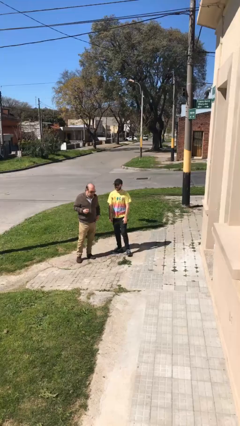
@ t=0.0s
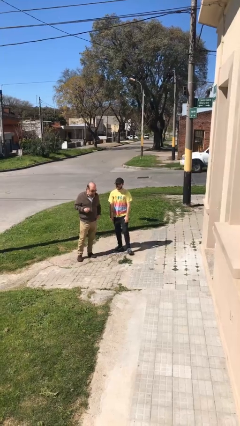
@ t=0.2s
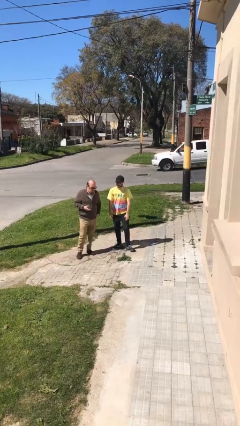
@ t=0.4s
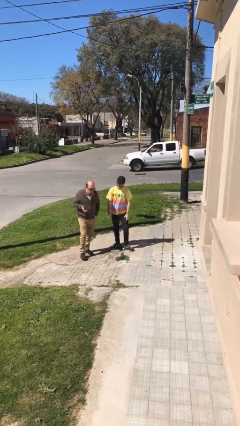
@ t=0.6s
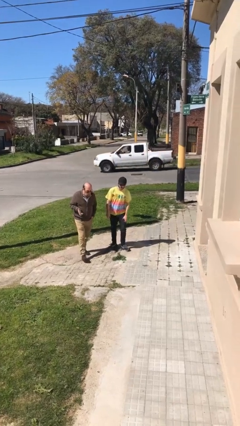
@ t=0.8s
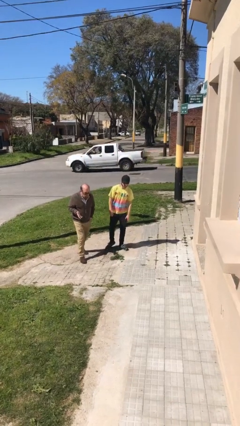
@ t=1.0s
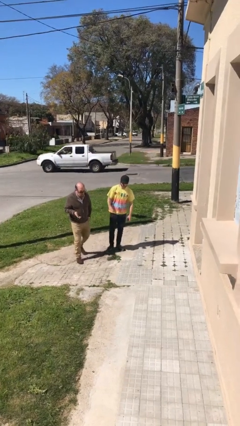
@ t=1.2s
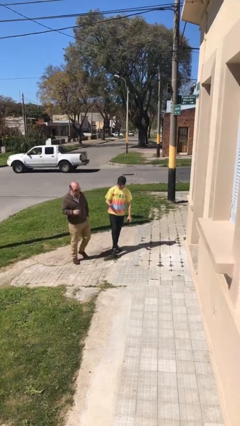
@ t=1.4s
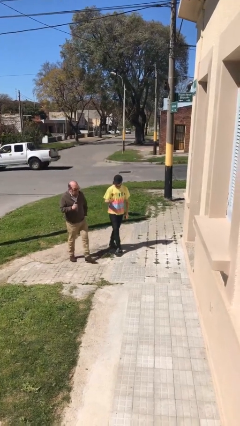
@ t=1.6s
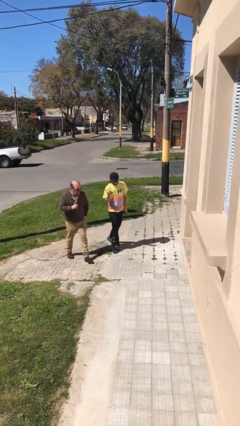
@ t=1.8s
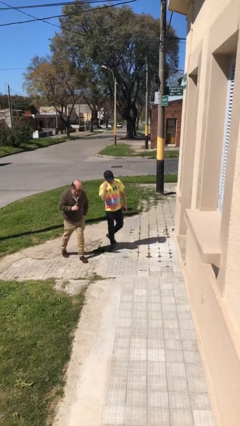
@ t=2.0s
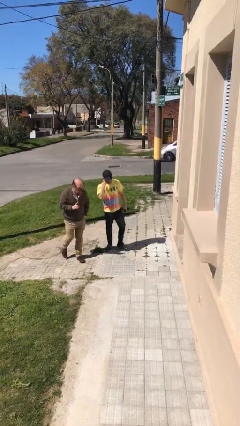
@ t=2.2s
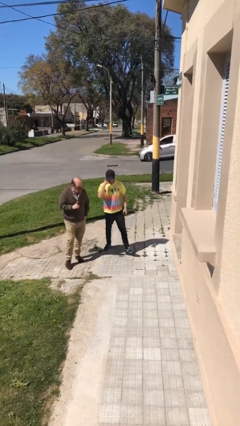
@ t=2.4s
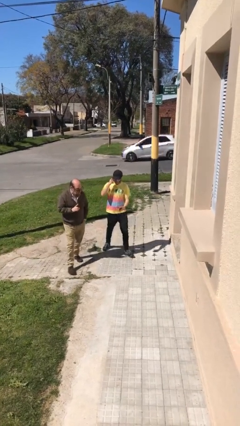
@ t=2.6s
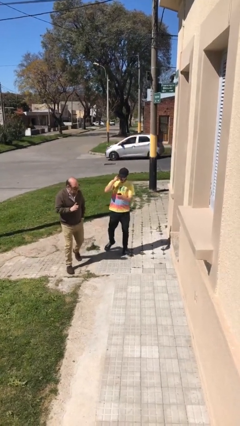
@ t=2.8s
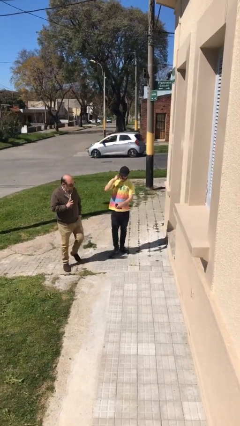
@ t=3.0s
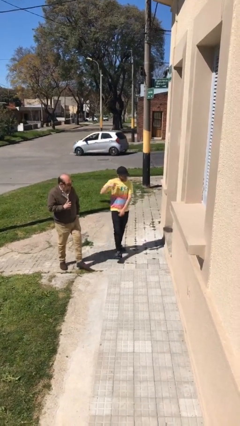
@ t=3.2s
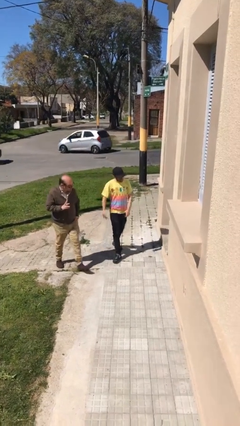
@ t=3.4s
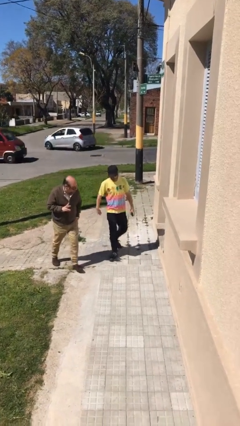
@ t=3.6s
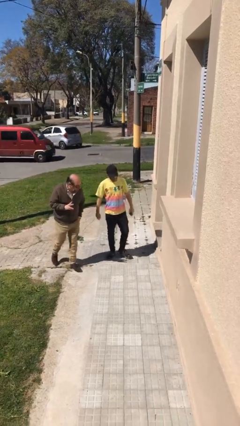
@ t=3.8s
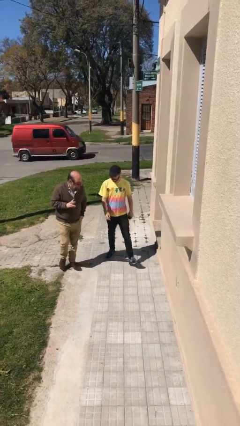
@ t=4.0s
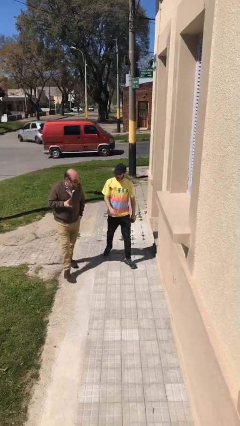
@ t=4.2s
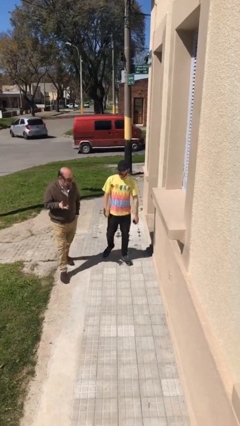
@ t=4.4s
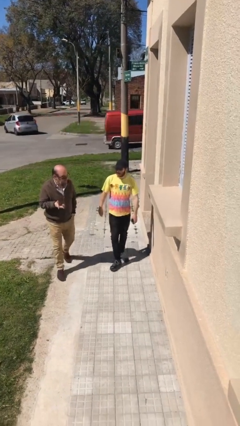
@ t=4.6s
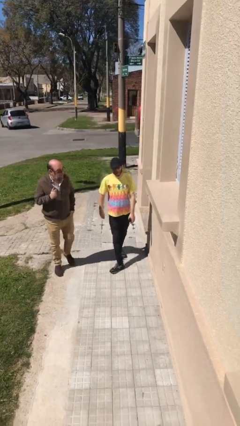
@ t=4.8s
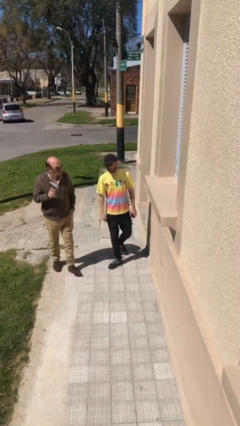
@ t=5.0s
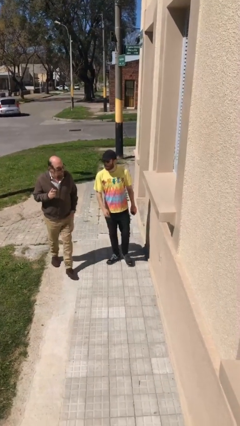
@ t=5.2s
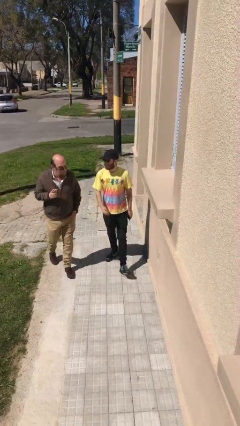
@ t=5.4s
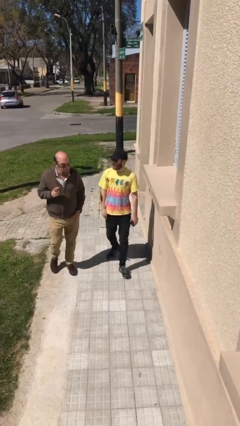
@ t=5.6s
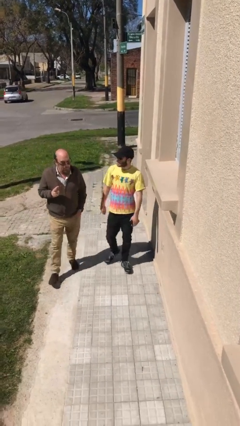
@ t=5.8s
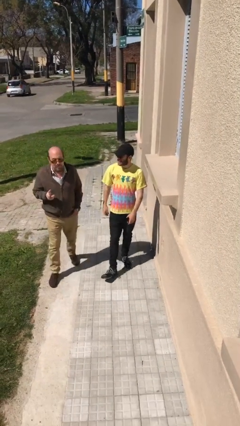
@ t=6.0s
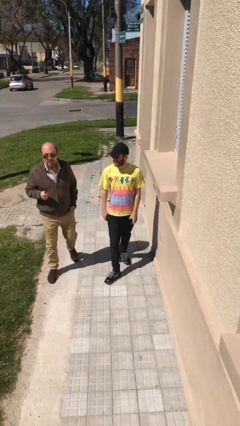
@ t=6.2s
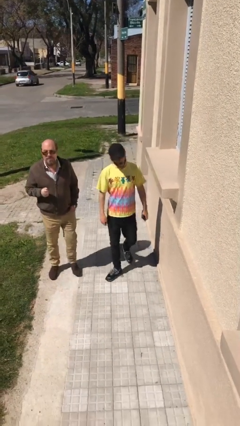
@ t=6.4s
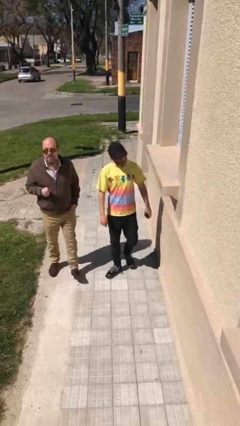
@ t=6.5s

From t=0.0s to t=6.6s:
person talks to person

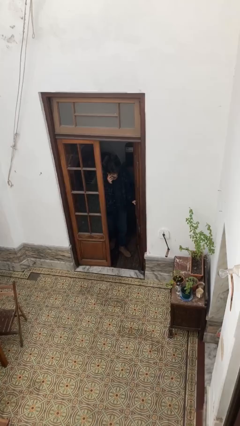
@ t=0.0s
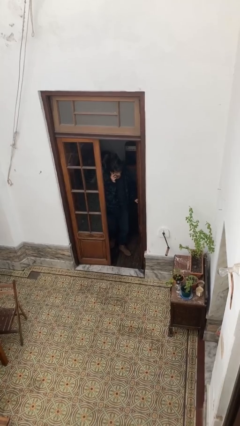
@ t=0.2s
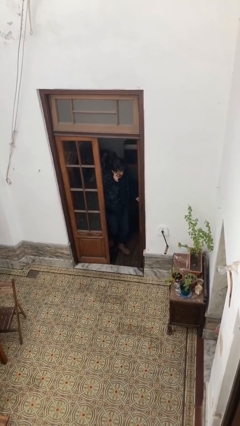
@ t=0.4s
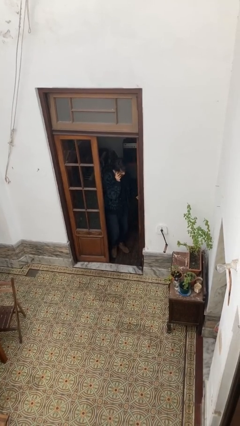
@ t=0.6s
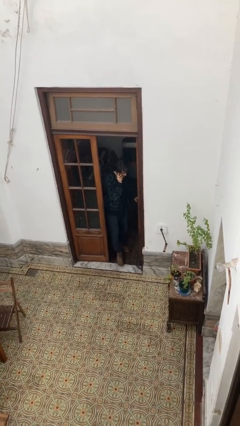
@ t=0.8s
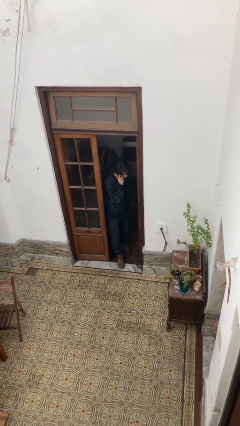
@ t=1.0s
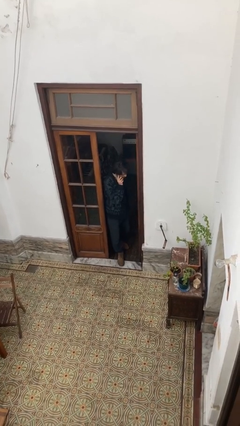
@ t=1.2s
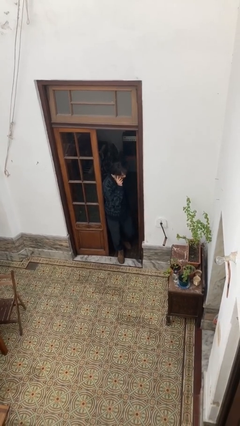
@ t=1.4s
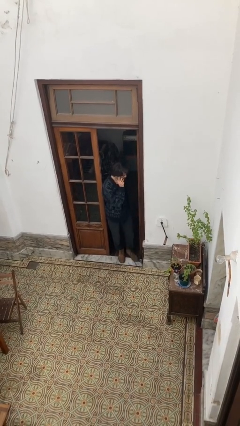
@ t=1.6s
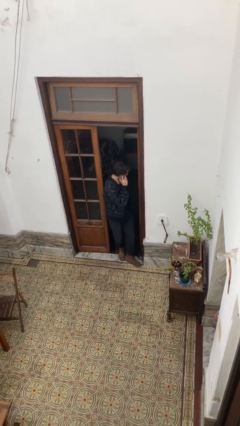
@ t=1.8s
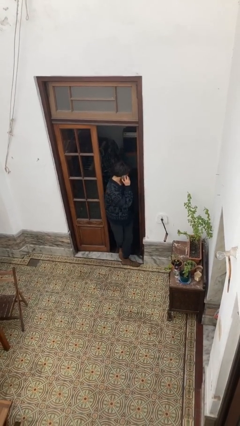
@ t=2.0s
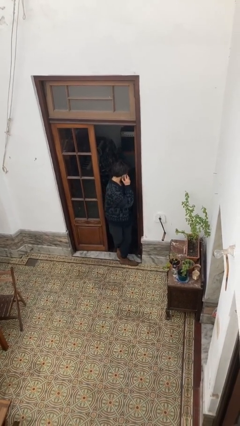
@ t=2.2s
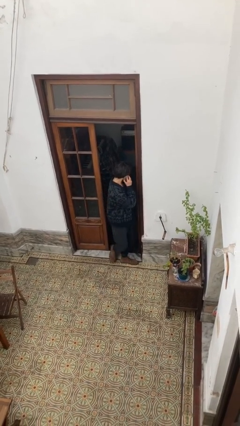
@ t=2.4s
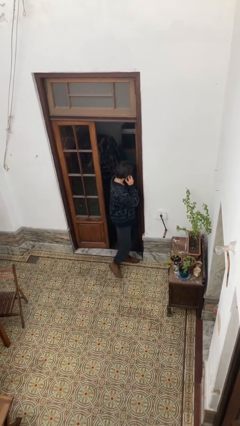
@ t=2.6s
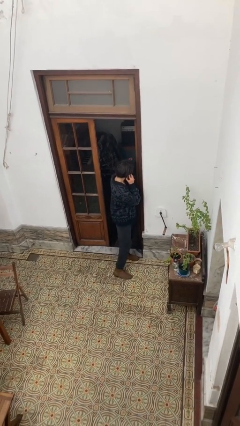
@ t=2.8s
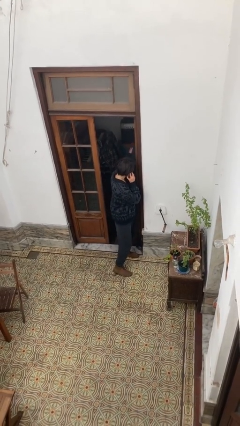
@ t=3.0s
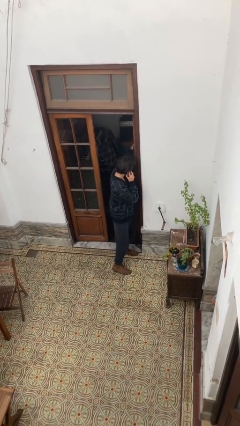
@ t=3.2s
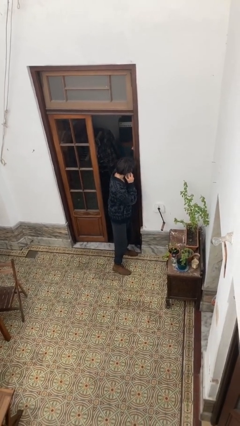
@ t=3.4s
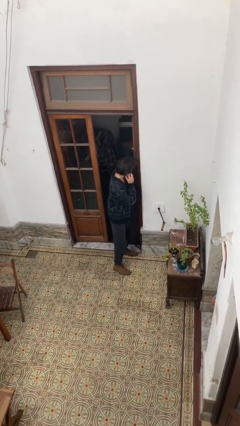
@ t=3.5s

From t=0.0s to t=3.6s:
person enters scene through structure

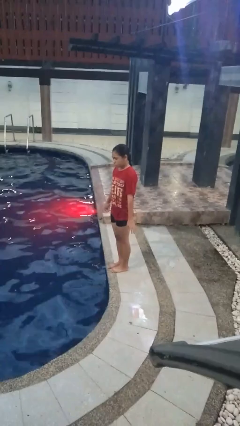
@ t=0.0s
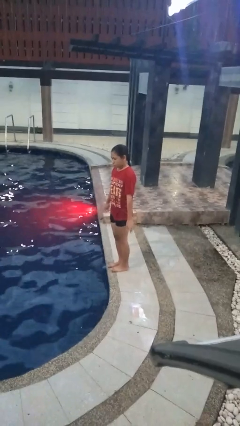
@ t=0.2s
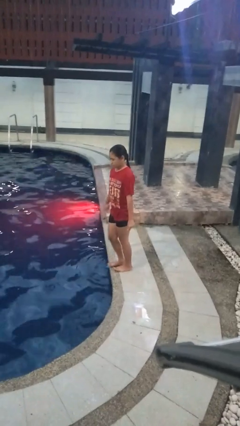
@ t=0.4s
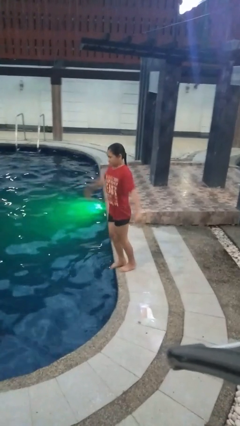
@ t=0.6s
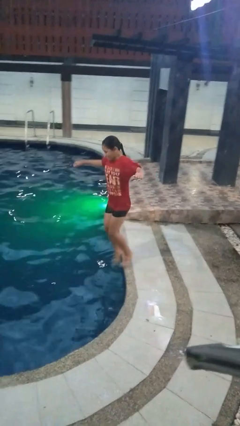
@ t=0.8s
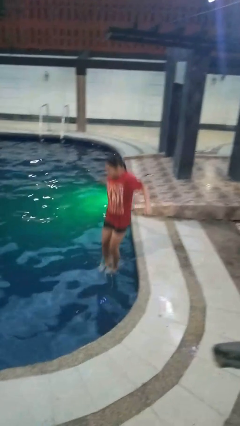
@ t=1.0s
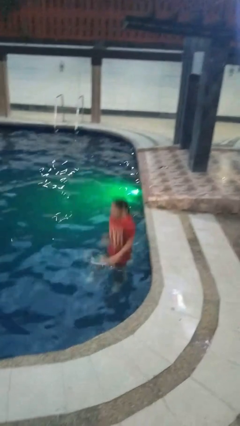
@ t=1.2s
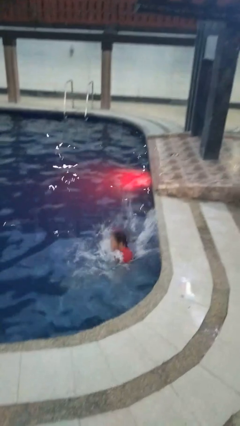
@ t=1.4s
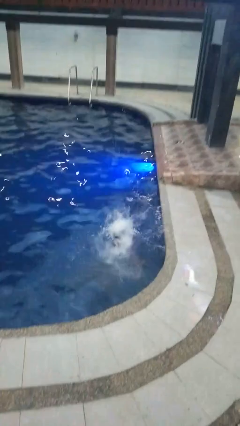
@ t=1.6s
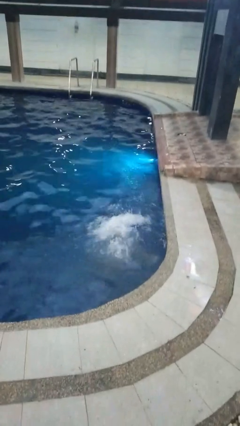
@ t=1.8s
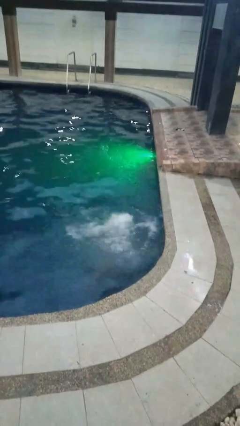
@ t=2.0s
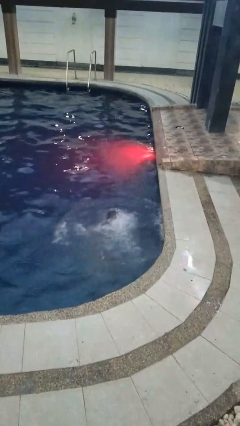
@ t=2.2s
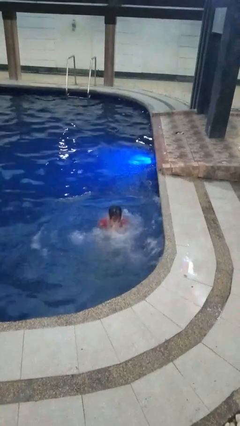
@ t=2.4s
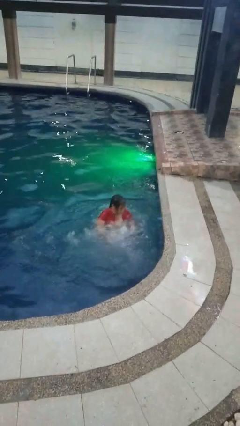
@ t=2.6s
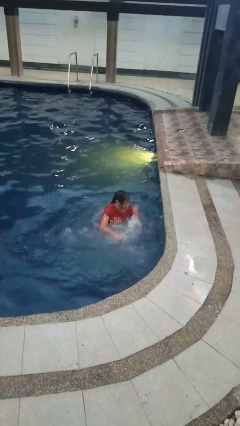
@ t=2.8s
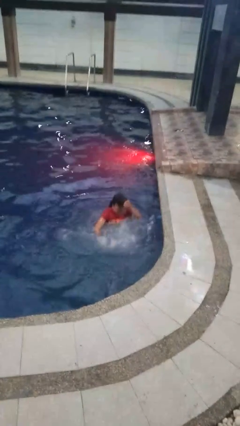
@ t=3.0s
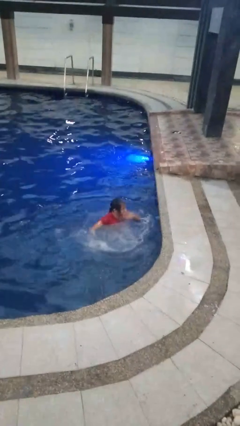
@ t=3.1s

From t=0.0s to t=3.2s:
person jumps into pool

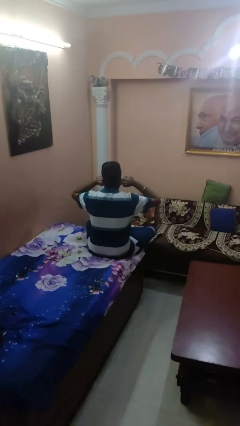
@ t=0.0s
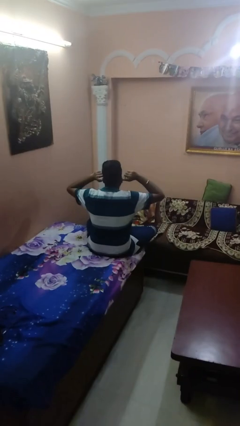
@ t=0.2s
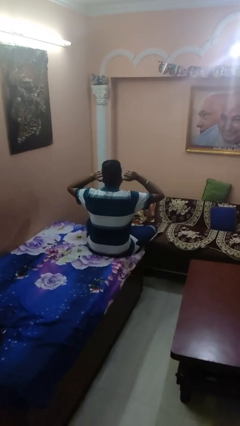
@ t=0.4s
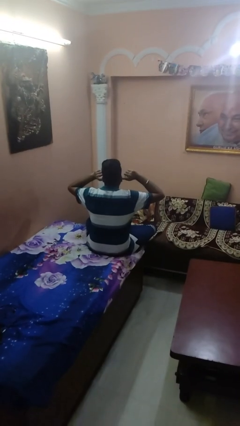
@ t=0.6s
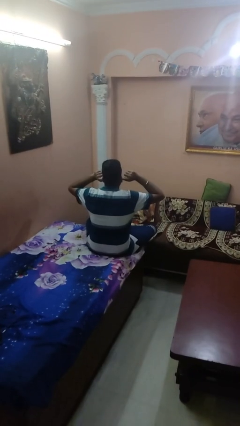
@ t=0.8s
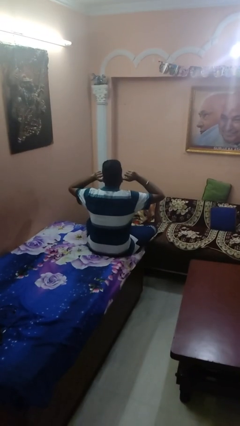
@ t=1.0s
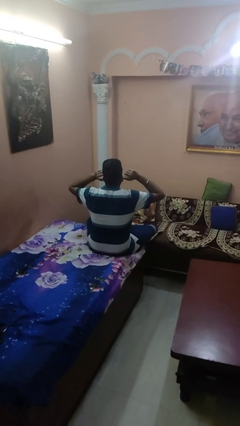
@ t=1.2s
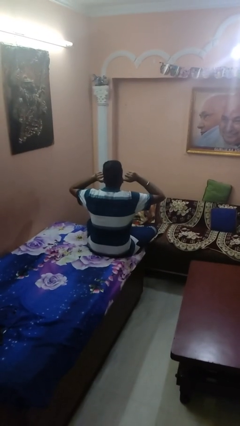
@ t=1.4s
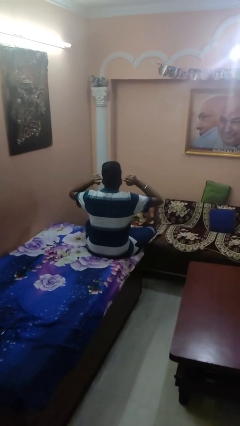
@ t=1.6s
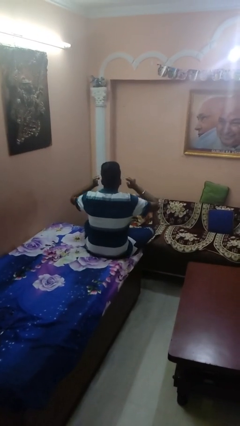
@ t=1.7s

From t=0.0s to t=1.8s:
person puts fingers in ear

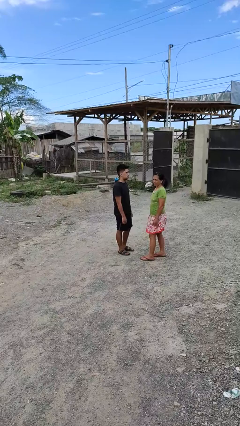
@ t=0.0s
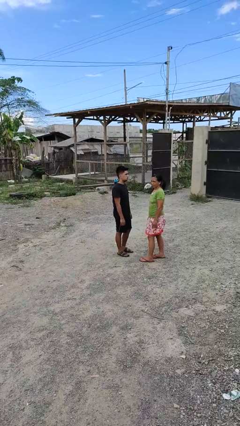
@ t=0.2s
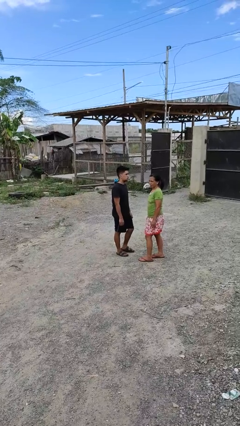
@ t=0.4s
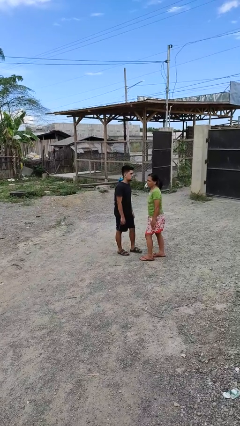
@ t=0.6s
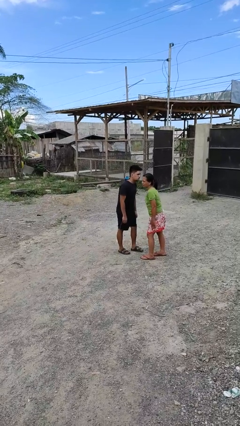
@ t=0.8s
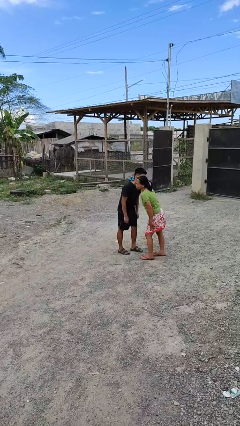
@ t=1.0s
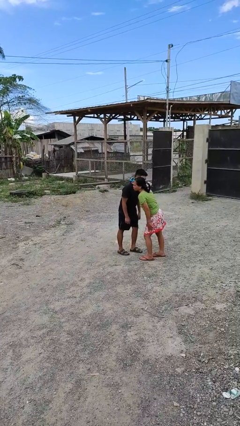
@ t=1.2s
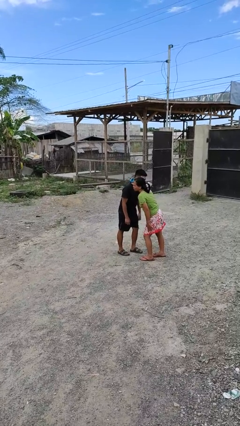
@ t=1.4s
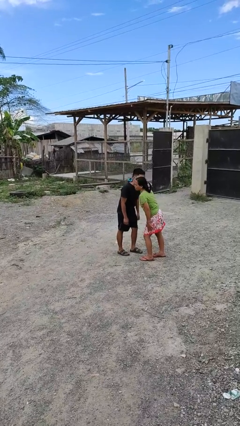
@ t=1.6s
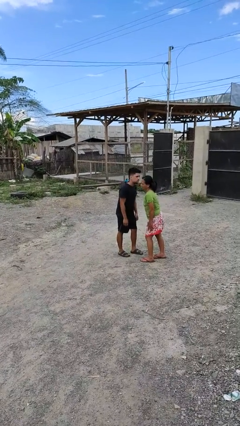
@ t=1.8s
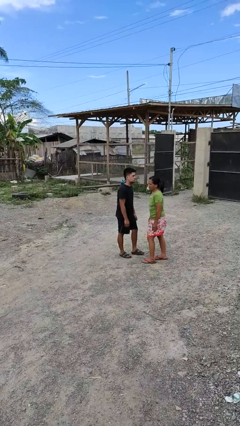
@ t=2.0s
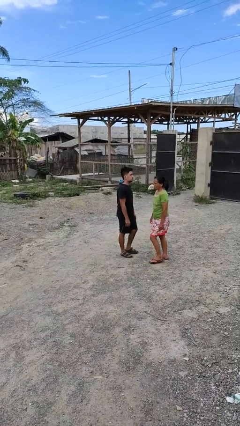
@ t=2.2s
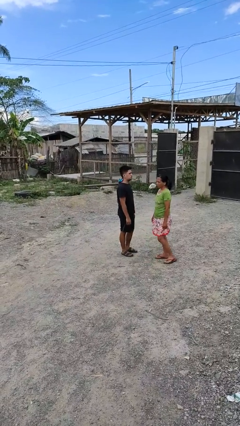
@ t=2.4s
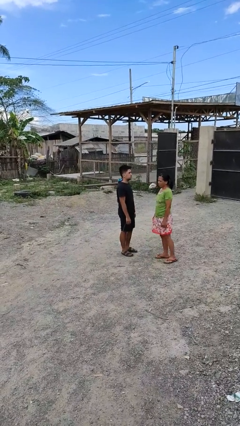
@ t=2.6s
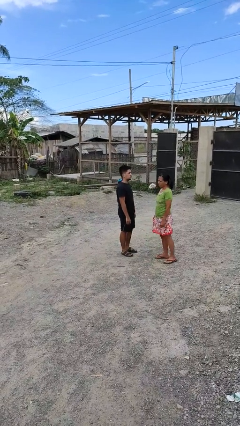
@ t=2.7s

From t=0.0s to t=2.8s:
person kisses cheek of person
